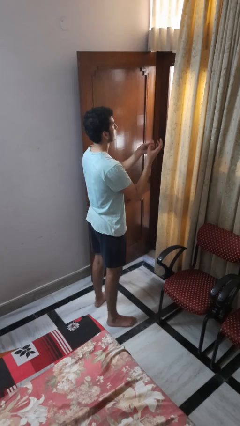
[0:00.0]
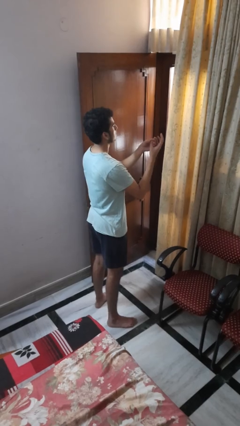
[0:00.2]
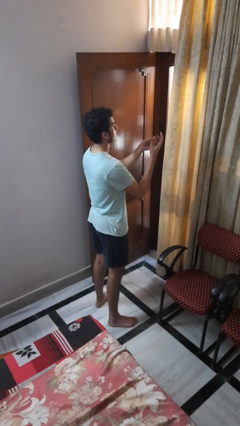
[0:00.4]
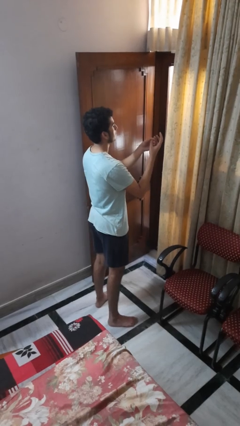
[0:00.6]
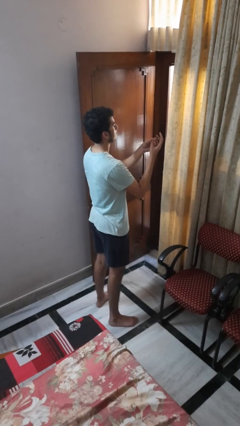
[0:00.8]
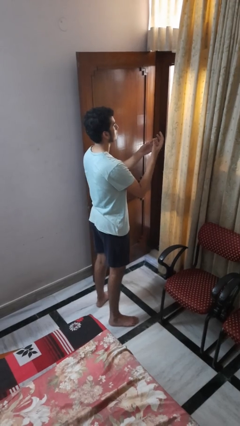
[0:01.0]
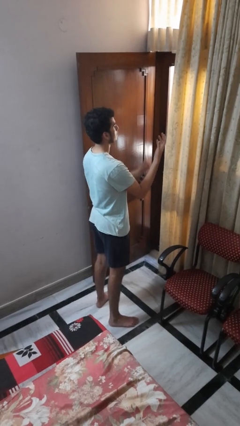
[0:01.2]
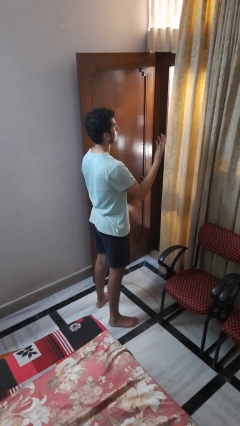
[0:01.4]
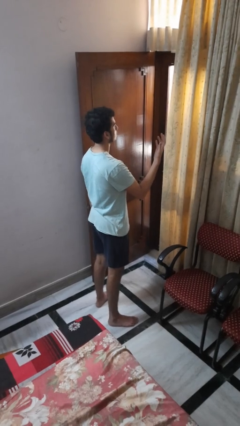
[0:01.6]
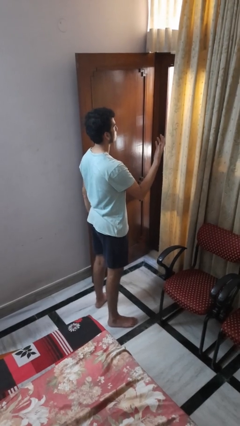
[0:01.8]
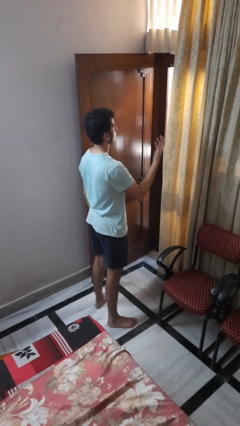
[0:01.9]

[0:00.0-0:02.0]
person puts on ring

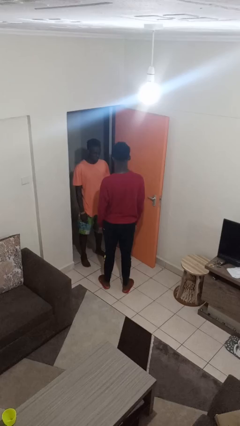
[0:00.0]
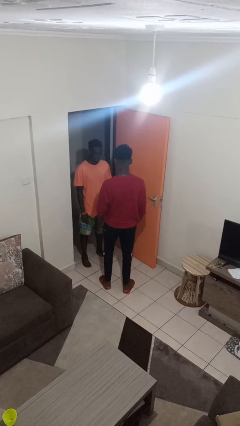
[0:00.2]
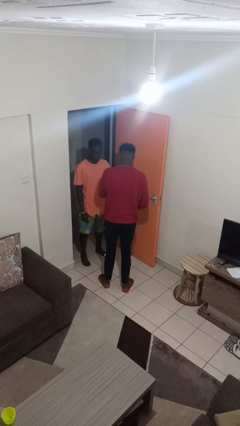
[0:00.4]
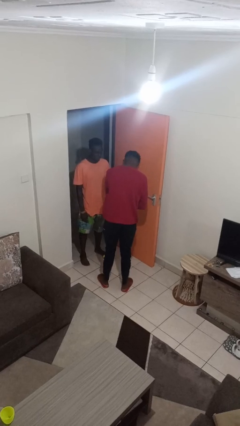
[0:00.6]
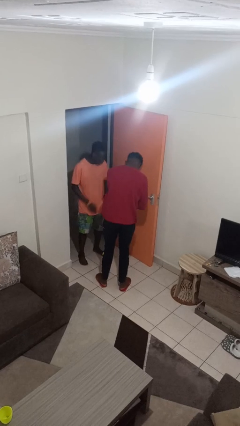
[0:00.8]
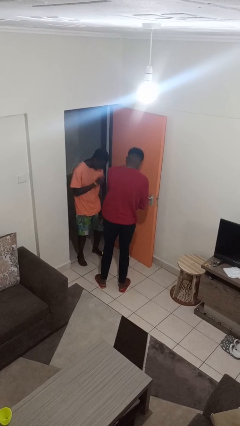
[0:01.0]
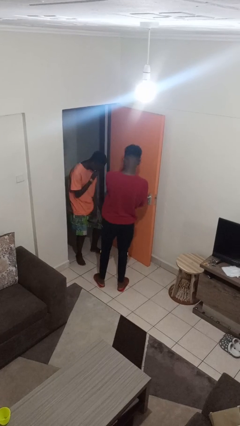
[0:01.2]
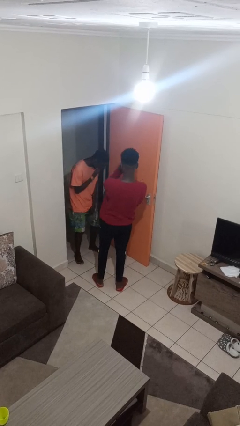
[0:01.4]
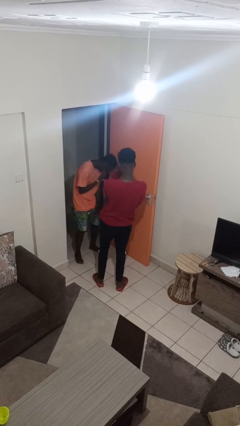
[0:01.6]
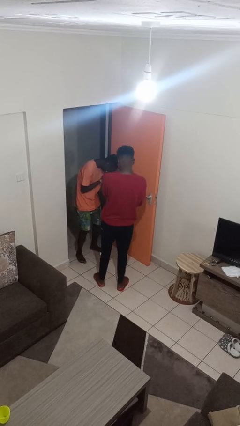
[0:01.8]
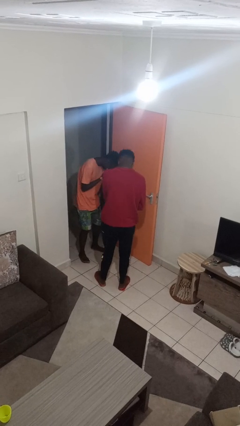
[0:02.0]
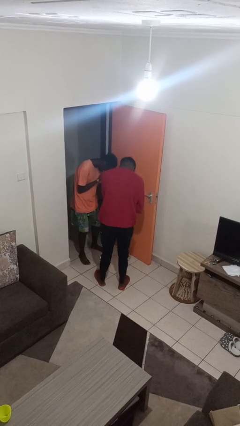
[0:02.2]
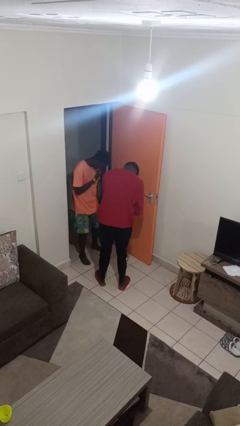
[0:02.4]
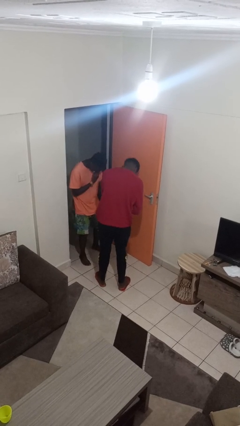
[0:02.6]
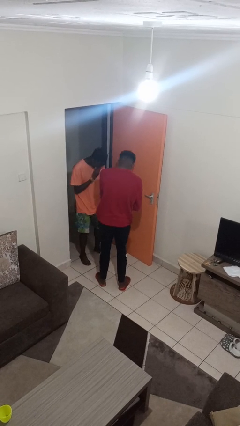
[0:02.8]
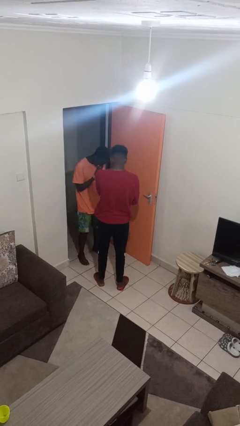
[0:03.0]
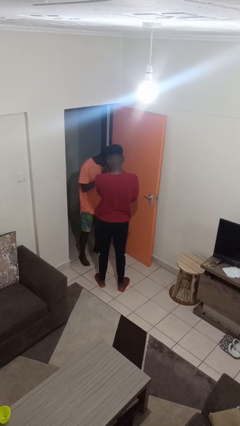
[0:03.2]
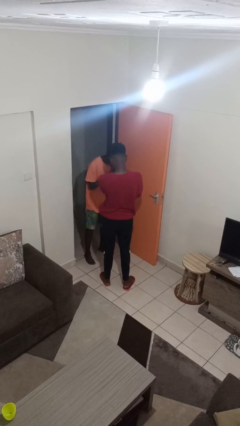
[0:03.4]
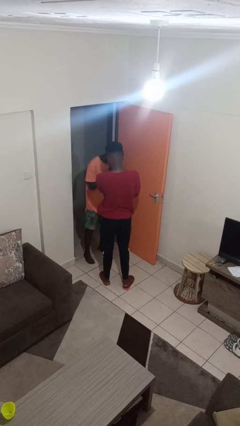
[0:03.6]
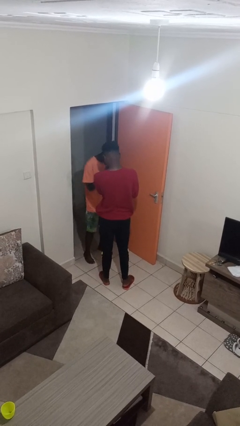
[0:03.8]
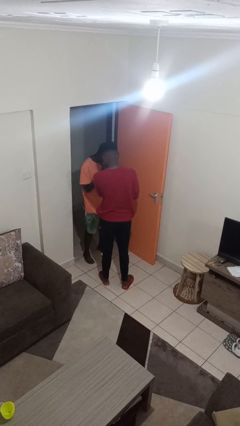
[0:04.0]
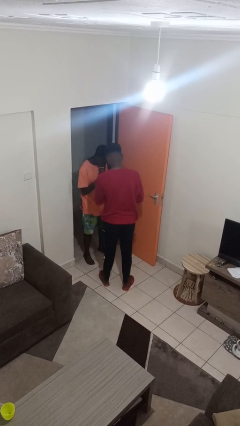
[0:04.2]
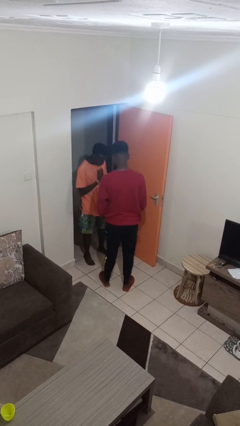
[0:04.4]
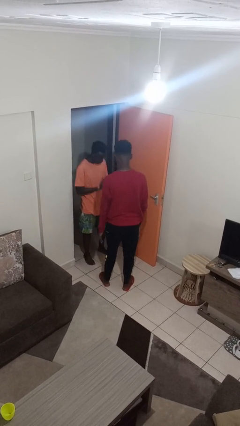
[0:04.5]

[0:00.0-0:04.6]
person laughs with person

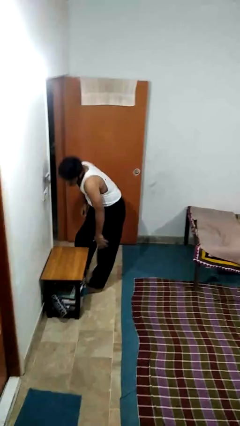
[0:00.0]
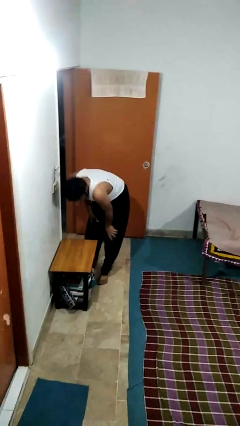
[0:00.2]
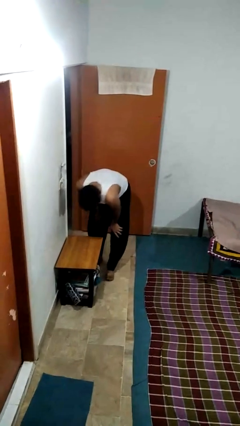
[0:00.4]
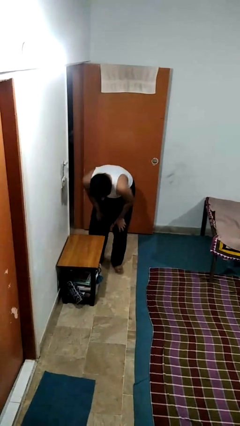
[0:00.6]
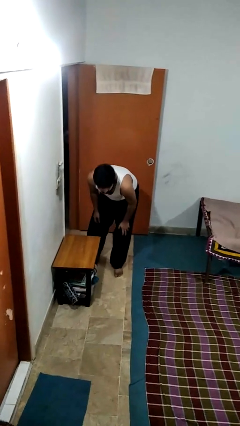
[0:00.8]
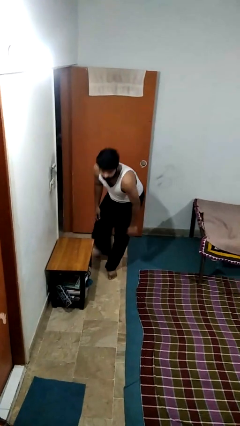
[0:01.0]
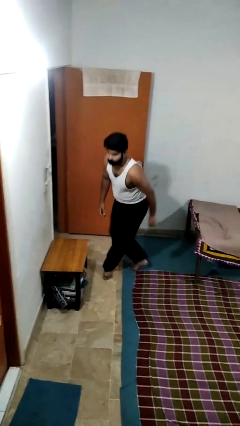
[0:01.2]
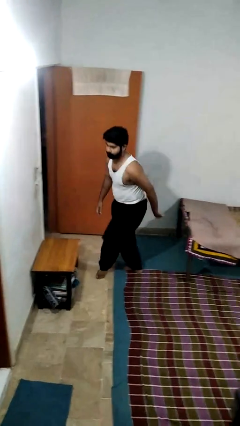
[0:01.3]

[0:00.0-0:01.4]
person bumps into table

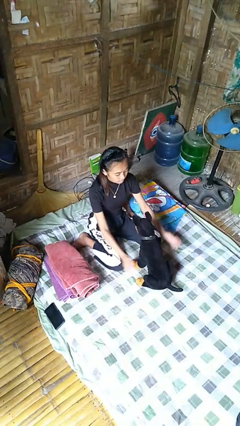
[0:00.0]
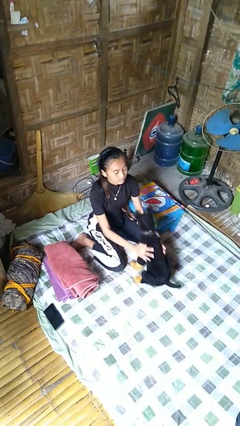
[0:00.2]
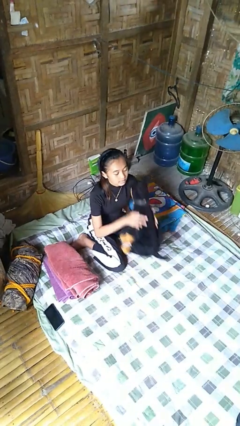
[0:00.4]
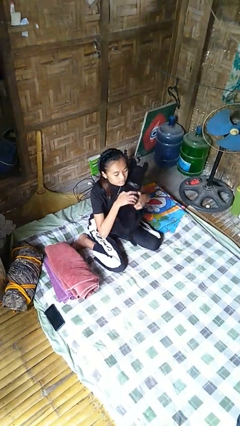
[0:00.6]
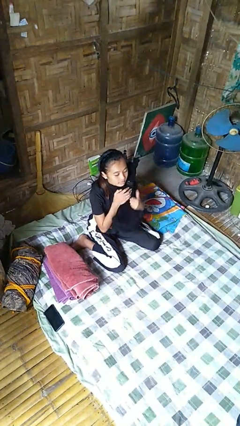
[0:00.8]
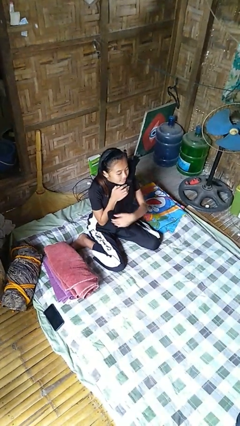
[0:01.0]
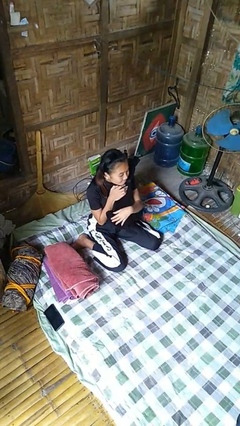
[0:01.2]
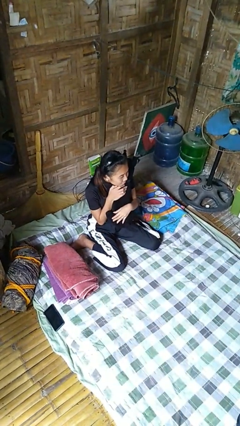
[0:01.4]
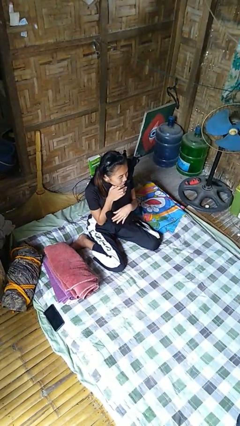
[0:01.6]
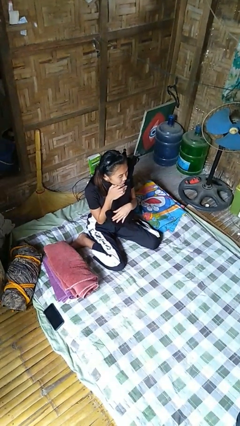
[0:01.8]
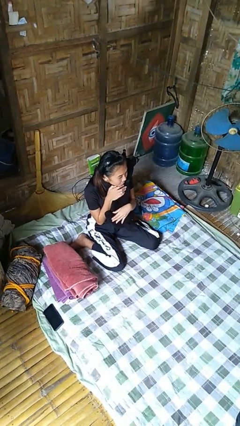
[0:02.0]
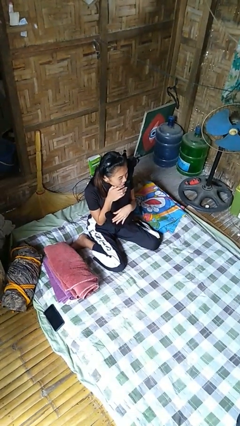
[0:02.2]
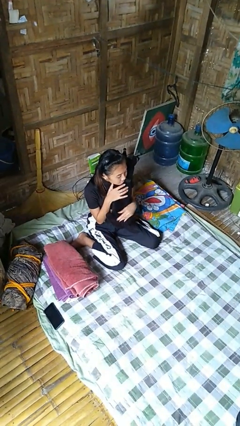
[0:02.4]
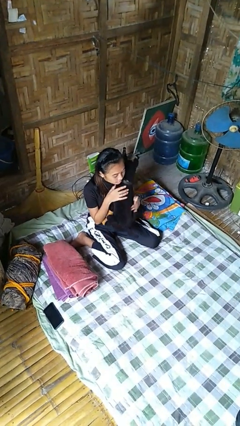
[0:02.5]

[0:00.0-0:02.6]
person hugs stuffed animal

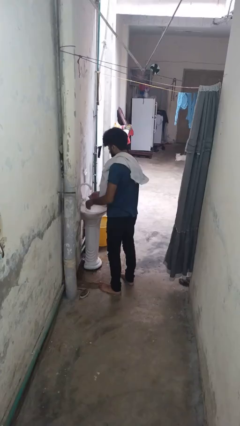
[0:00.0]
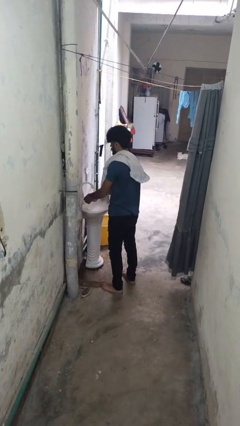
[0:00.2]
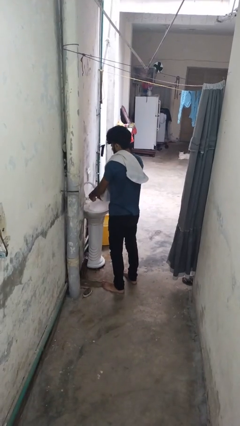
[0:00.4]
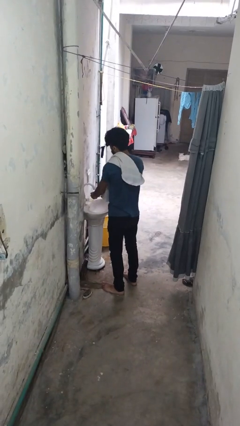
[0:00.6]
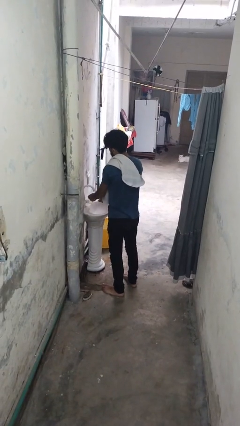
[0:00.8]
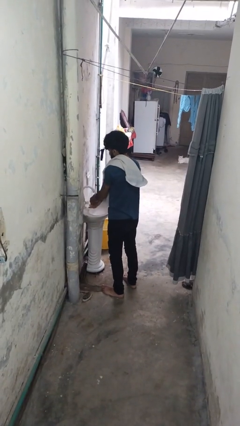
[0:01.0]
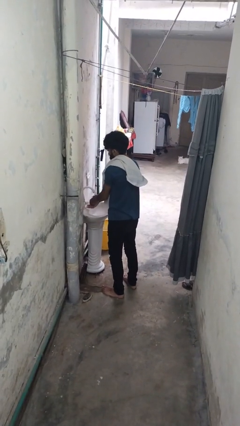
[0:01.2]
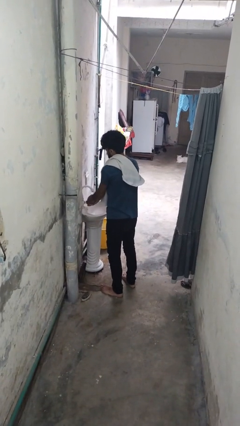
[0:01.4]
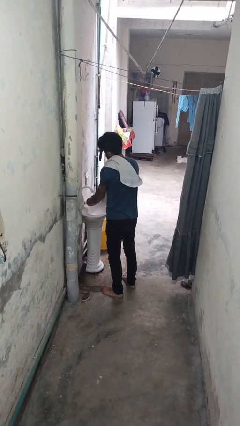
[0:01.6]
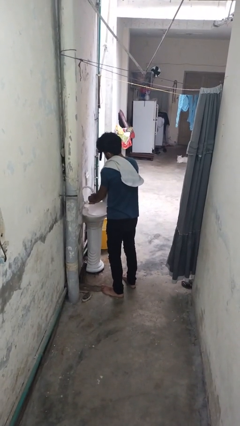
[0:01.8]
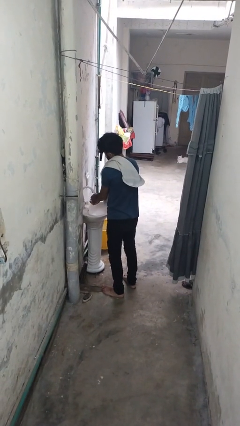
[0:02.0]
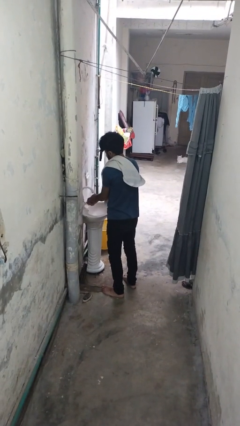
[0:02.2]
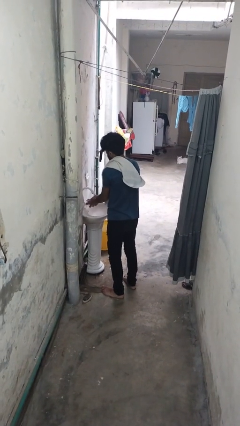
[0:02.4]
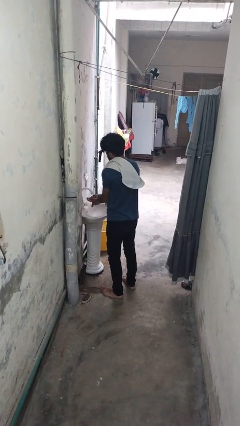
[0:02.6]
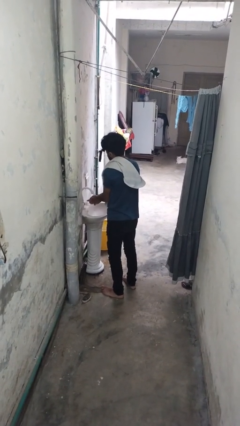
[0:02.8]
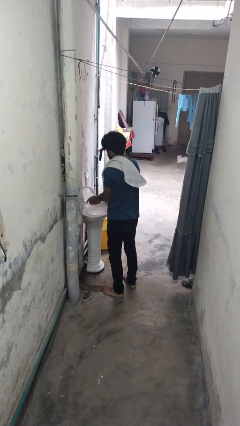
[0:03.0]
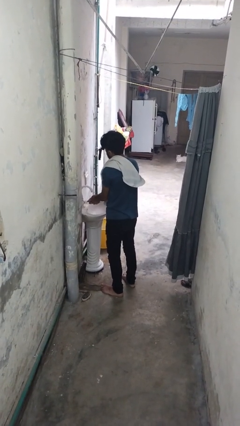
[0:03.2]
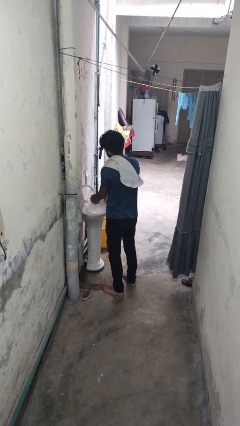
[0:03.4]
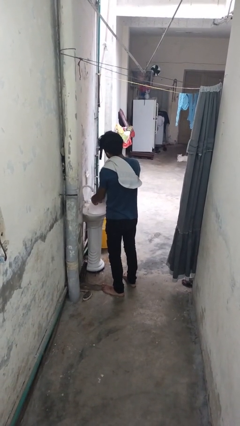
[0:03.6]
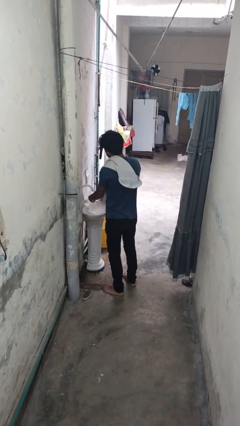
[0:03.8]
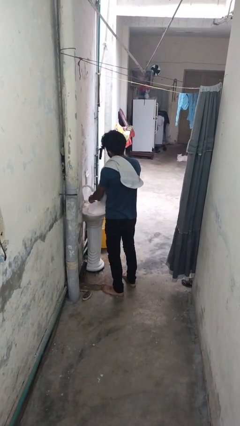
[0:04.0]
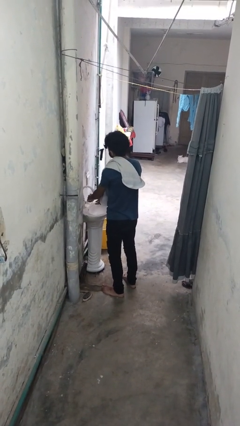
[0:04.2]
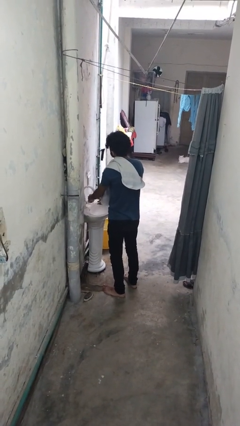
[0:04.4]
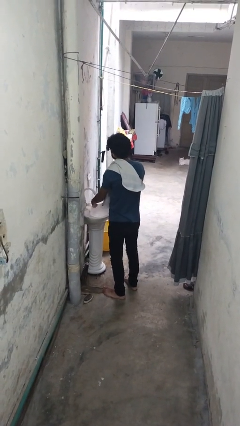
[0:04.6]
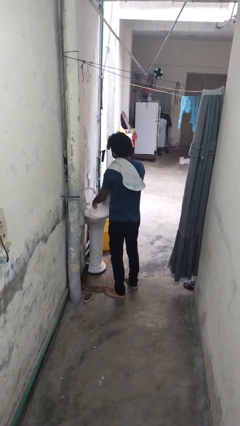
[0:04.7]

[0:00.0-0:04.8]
person washes hands

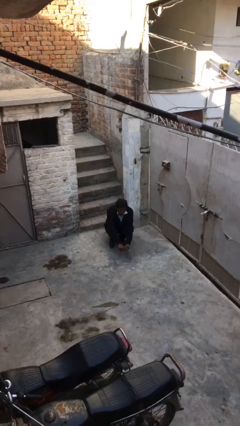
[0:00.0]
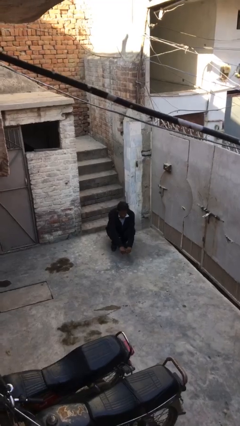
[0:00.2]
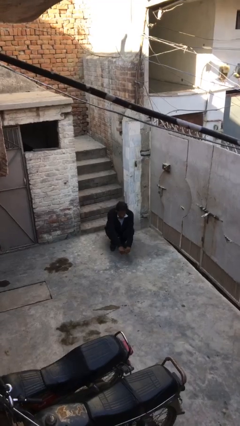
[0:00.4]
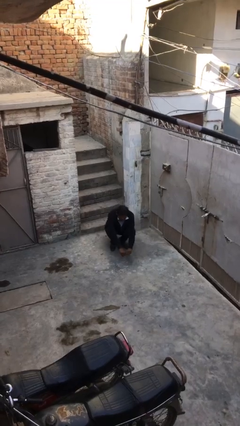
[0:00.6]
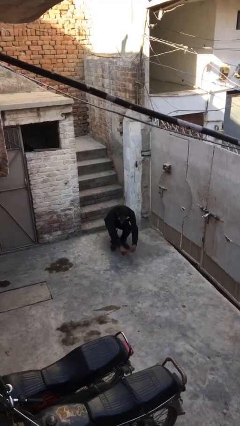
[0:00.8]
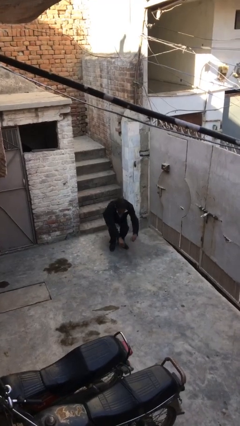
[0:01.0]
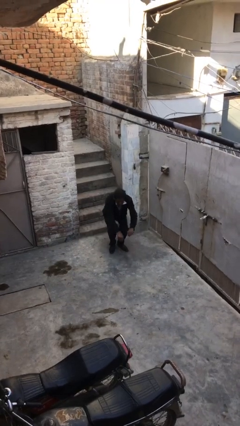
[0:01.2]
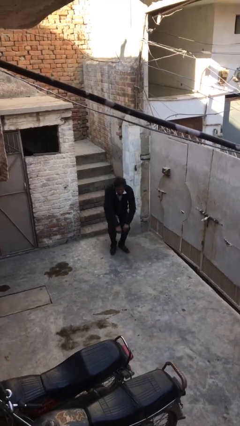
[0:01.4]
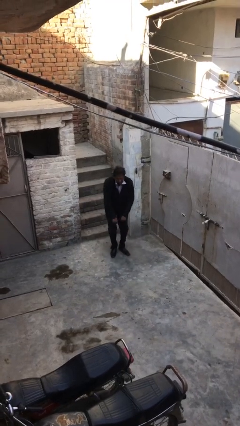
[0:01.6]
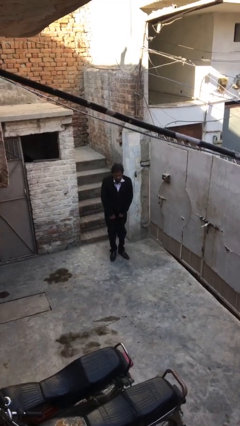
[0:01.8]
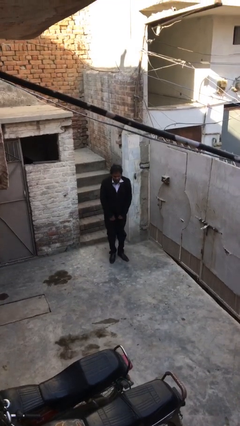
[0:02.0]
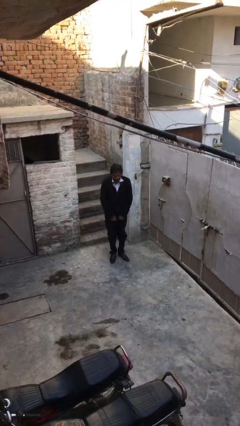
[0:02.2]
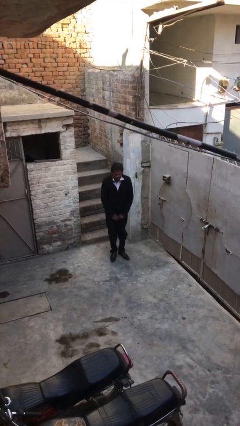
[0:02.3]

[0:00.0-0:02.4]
person stands up
